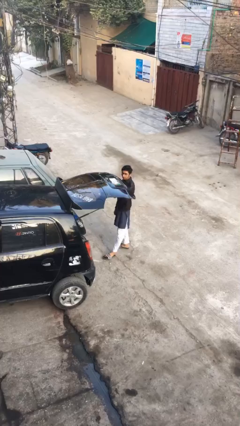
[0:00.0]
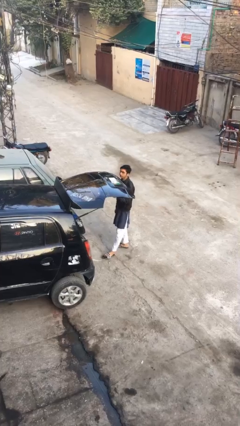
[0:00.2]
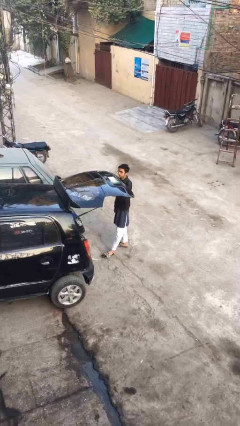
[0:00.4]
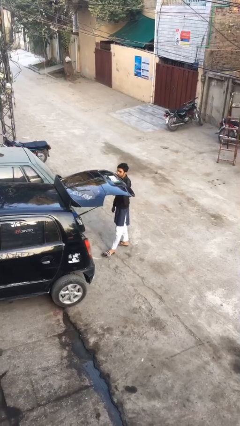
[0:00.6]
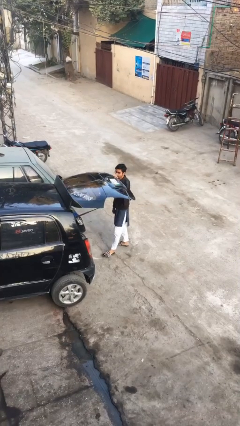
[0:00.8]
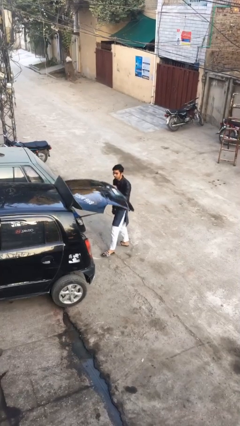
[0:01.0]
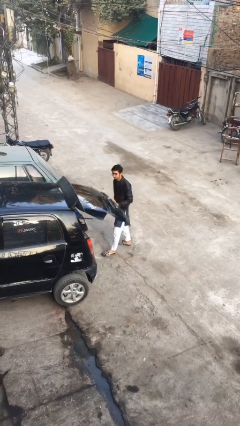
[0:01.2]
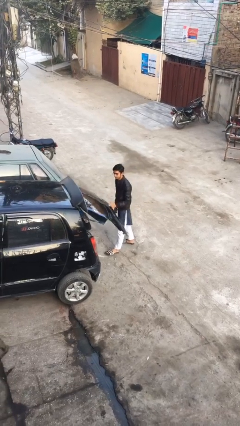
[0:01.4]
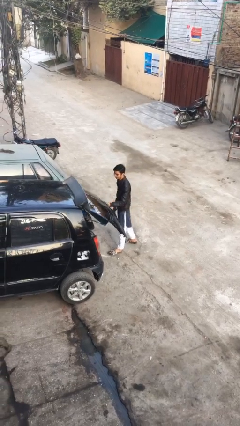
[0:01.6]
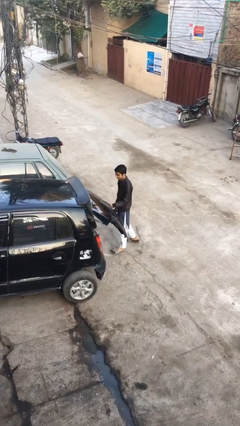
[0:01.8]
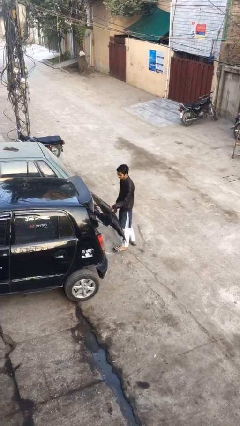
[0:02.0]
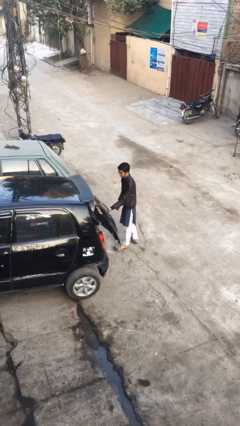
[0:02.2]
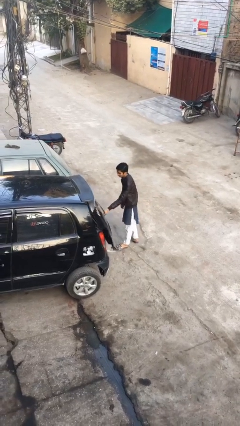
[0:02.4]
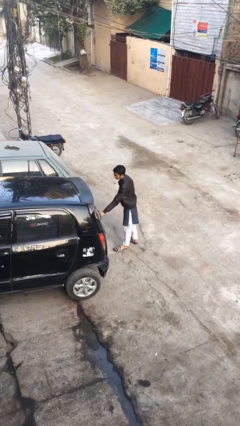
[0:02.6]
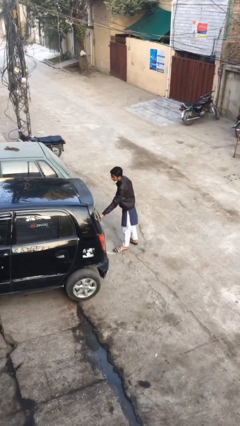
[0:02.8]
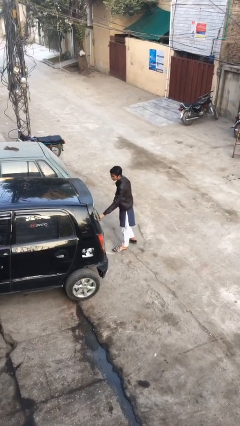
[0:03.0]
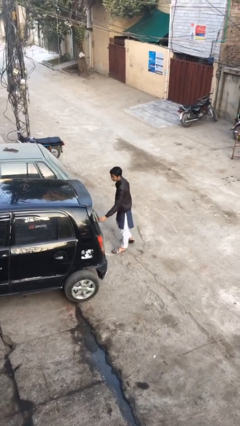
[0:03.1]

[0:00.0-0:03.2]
person closes car trunk

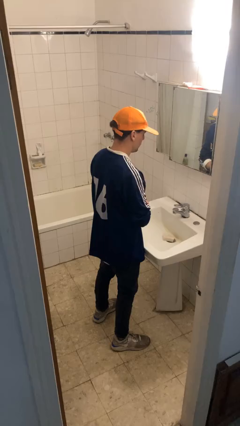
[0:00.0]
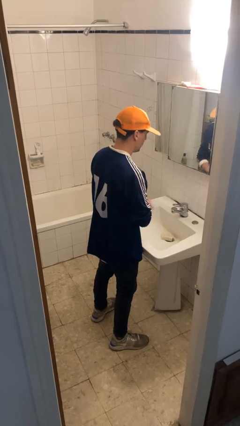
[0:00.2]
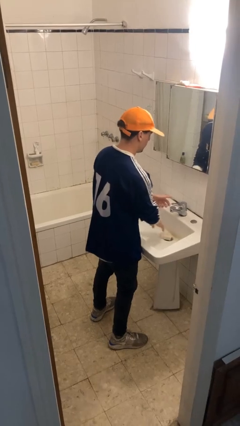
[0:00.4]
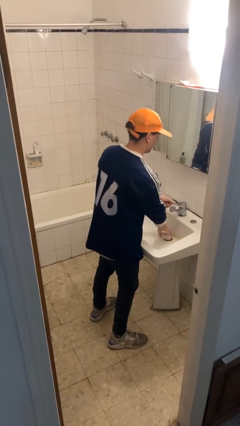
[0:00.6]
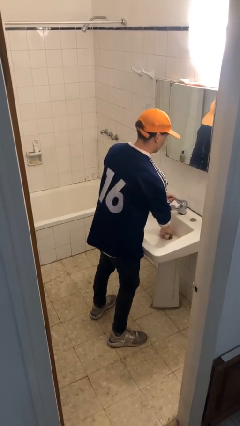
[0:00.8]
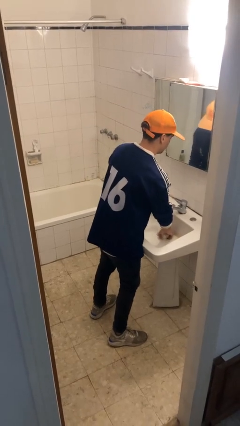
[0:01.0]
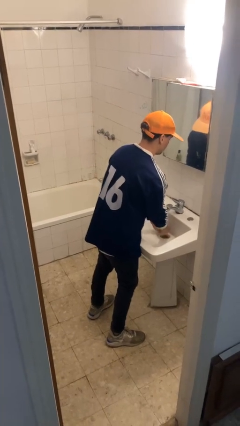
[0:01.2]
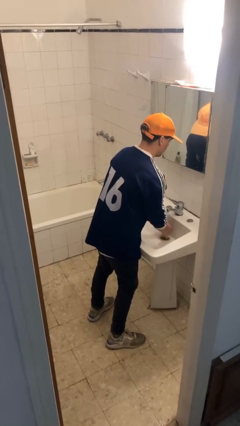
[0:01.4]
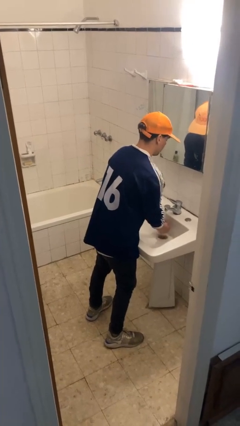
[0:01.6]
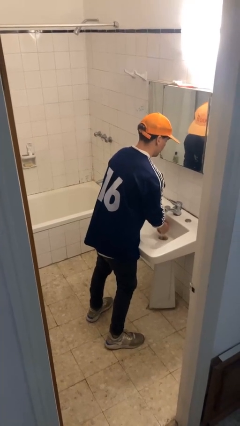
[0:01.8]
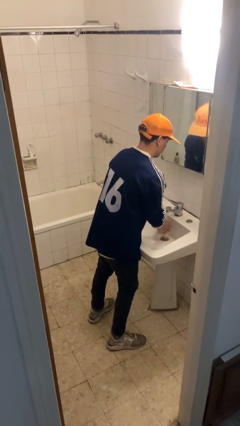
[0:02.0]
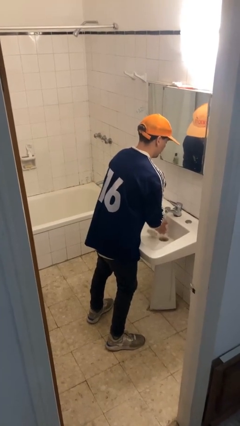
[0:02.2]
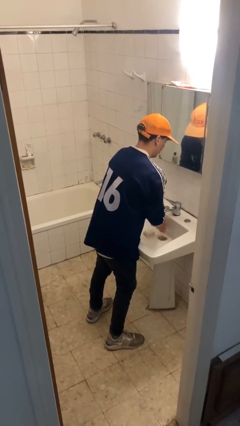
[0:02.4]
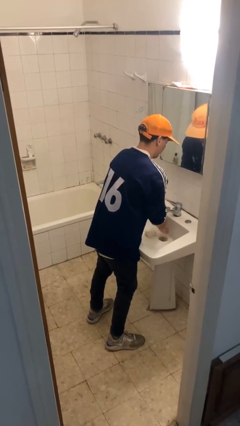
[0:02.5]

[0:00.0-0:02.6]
person washes hands

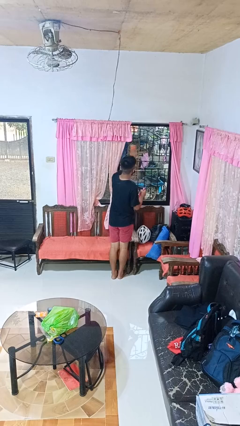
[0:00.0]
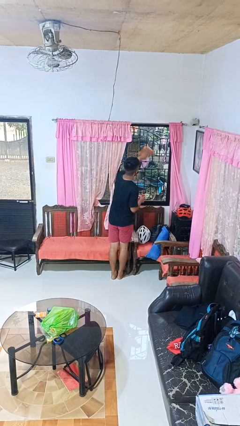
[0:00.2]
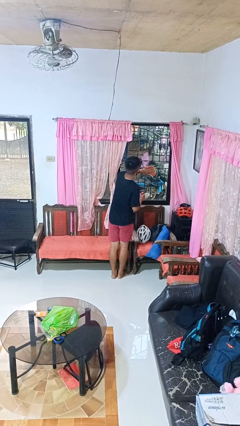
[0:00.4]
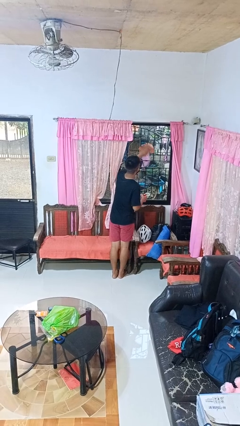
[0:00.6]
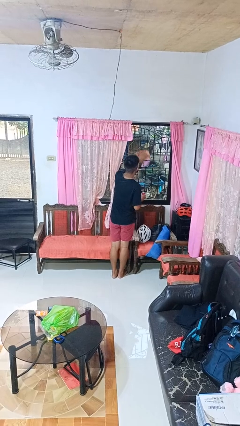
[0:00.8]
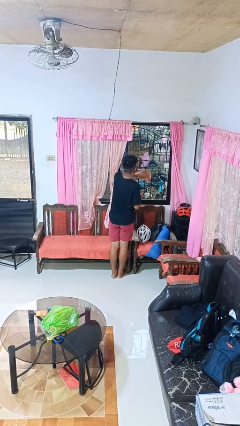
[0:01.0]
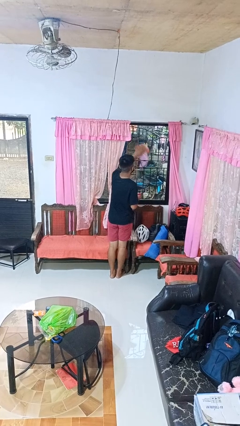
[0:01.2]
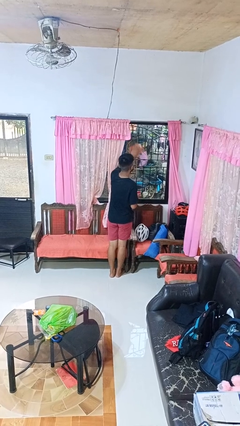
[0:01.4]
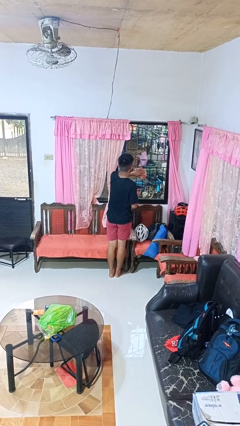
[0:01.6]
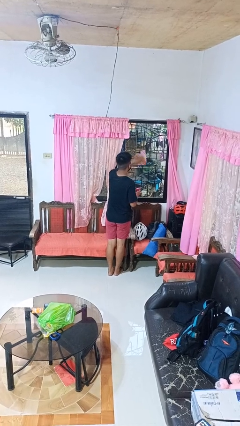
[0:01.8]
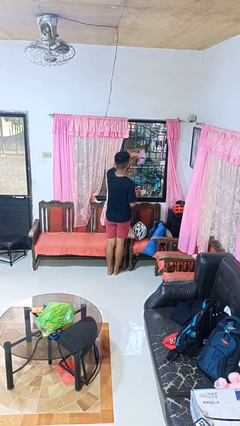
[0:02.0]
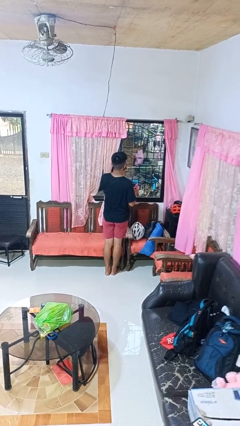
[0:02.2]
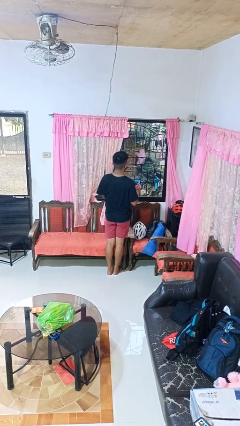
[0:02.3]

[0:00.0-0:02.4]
person washes window

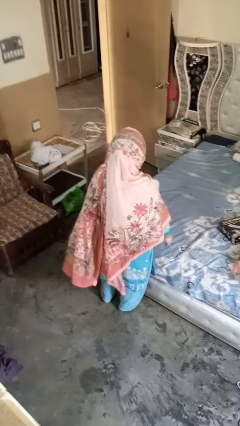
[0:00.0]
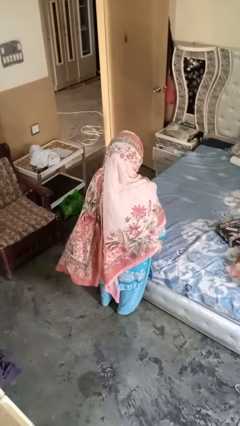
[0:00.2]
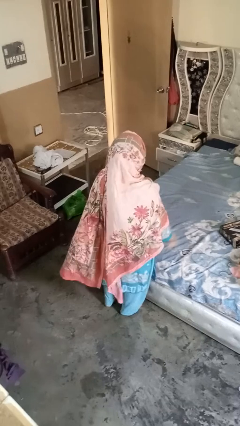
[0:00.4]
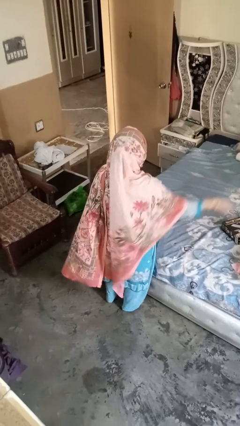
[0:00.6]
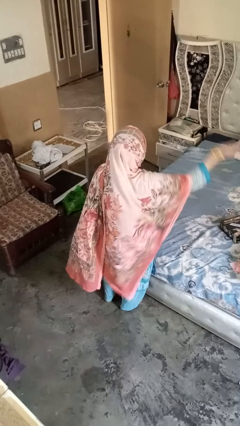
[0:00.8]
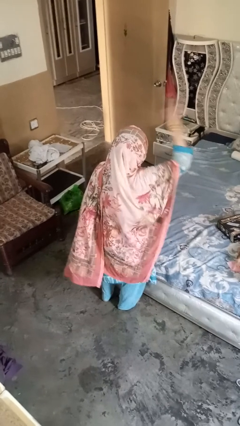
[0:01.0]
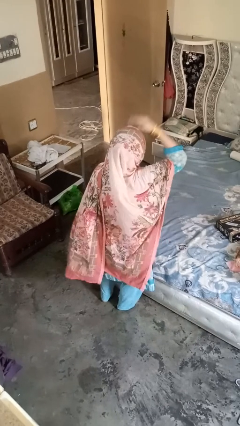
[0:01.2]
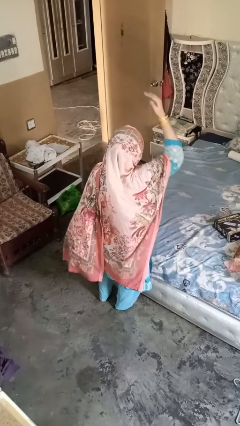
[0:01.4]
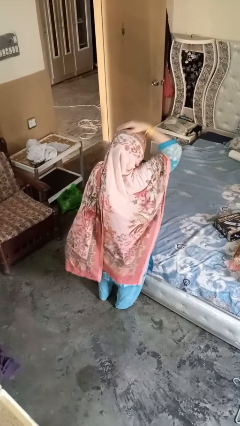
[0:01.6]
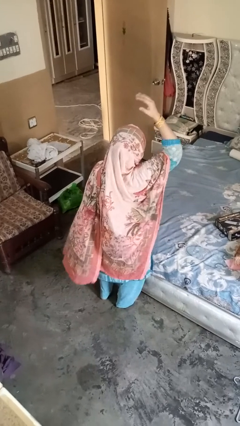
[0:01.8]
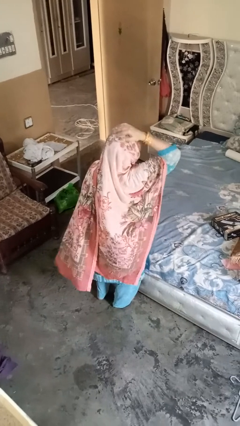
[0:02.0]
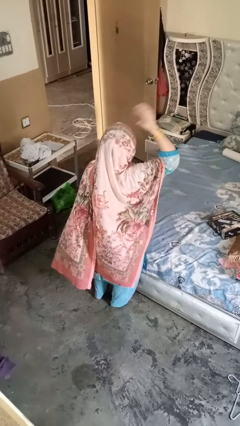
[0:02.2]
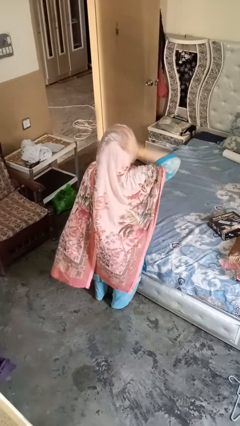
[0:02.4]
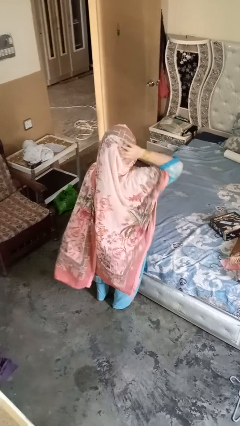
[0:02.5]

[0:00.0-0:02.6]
person pats head

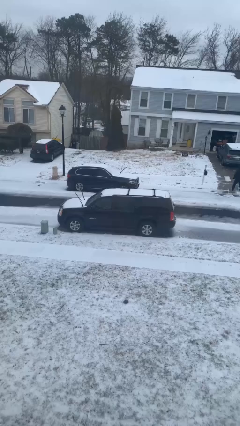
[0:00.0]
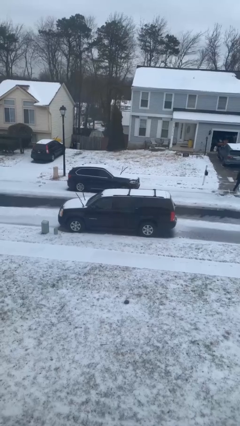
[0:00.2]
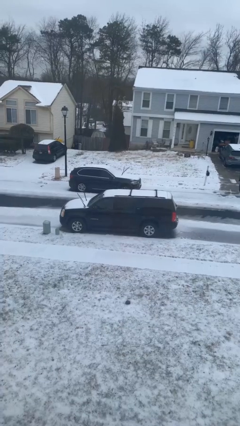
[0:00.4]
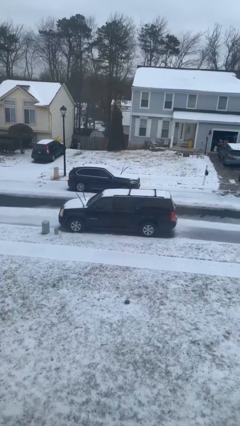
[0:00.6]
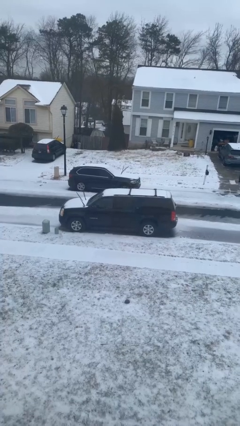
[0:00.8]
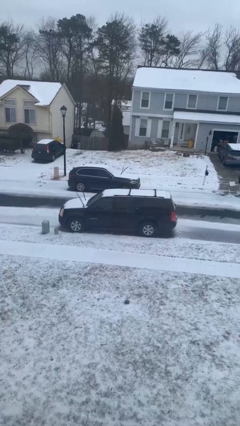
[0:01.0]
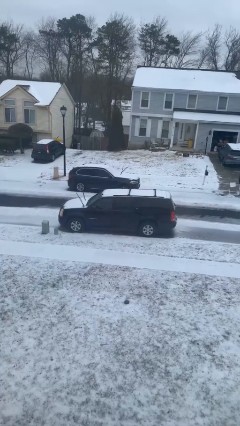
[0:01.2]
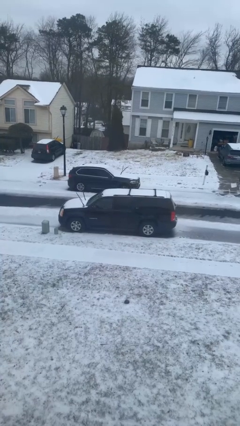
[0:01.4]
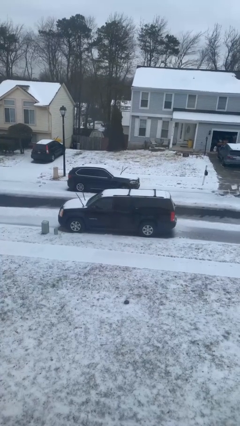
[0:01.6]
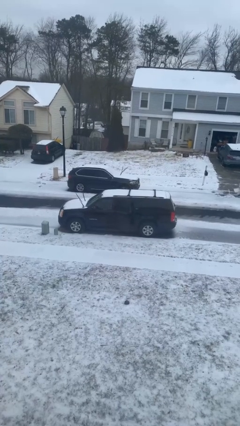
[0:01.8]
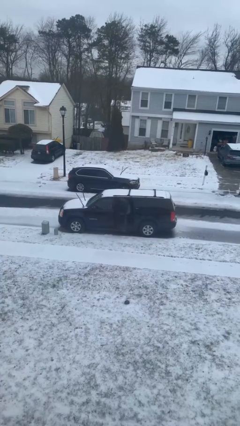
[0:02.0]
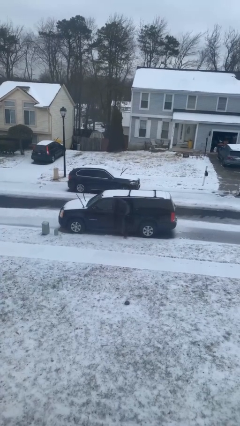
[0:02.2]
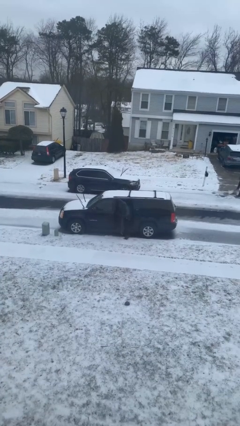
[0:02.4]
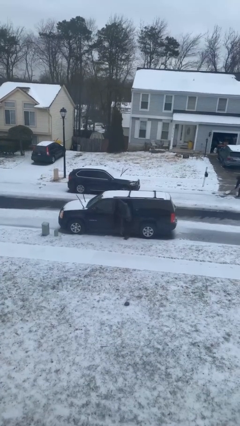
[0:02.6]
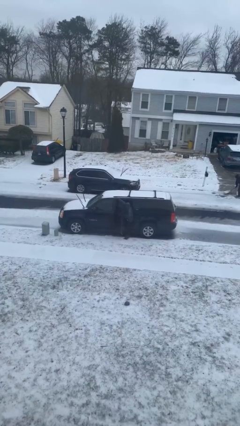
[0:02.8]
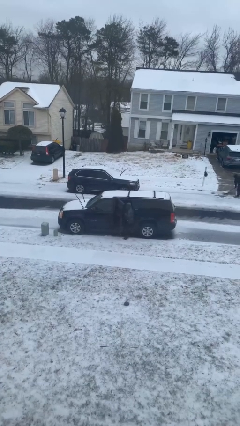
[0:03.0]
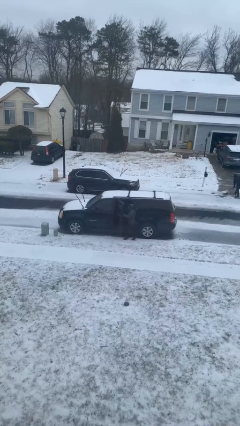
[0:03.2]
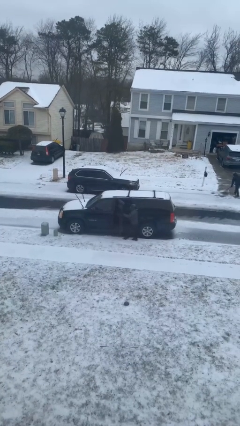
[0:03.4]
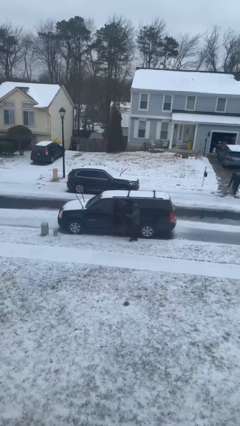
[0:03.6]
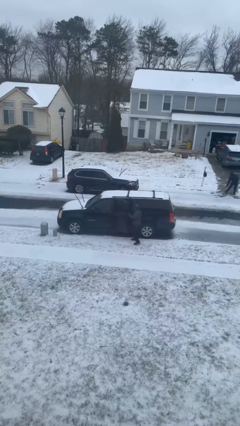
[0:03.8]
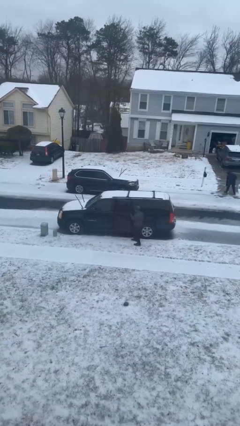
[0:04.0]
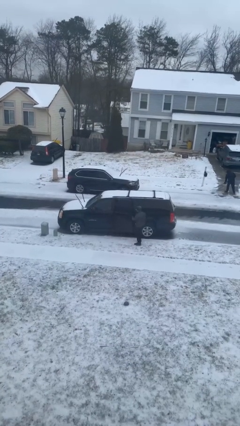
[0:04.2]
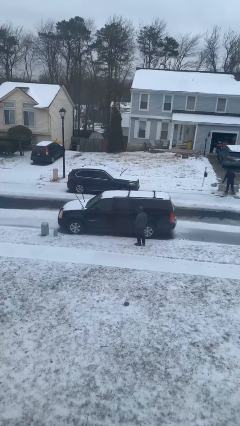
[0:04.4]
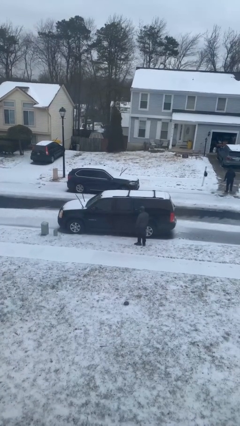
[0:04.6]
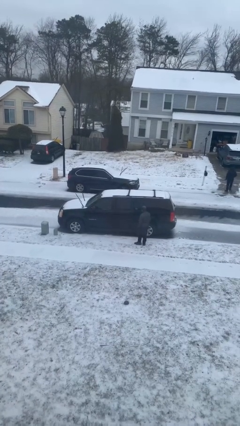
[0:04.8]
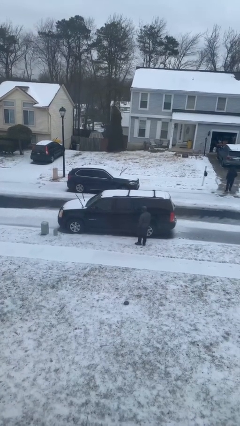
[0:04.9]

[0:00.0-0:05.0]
car drops off person

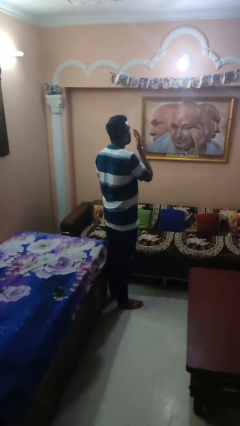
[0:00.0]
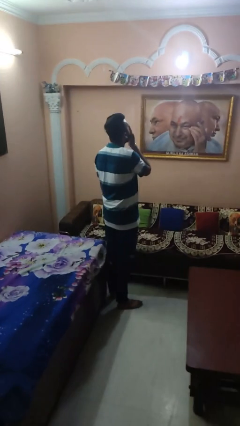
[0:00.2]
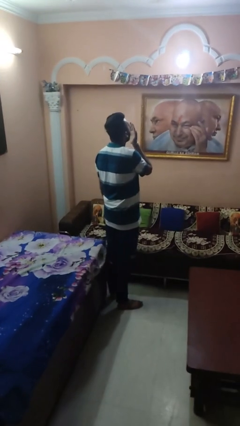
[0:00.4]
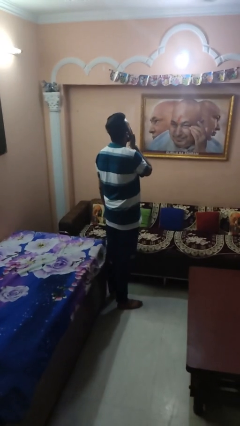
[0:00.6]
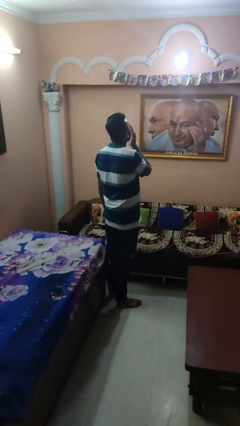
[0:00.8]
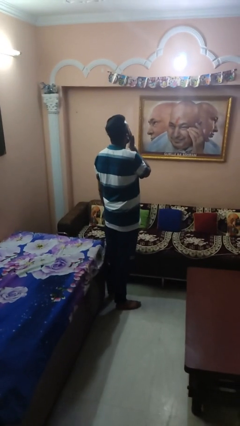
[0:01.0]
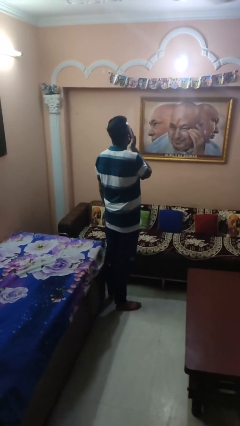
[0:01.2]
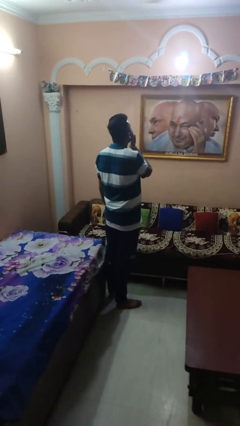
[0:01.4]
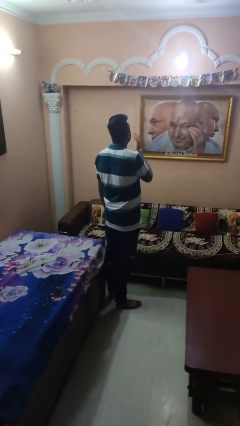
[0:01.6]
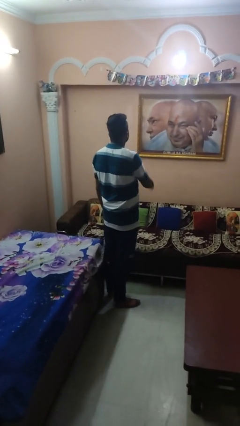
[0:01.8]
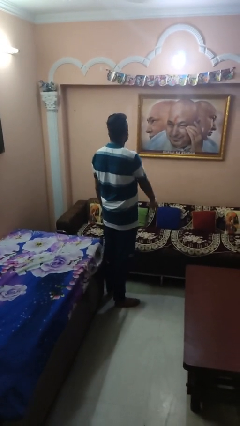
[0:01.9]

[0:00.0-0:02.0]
person yawns
